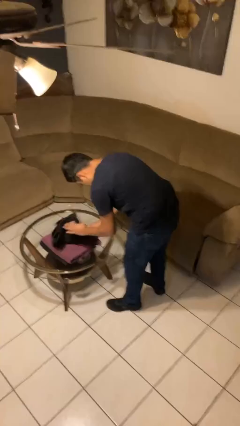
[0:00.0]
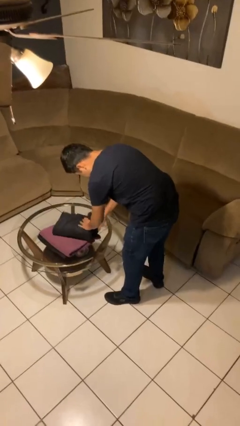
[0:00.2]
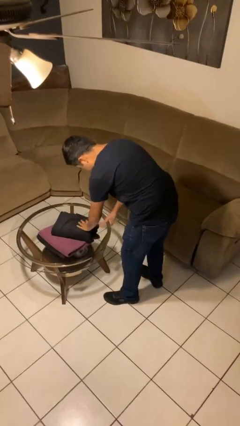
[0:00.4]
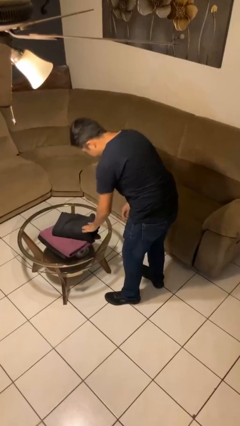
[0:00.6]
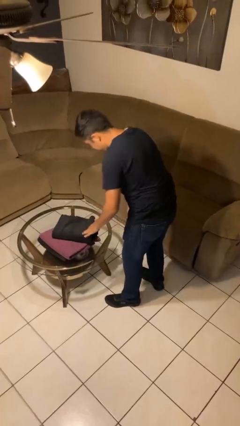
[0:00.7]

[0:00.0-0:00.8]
person folds towel

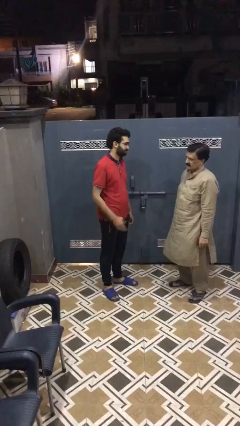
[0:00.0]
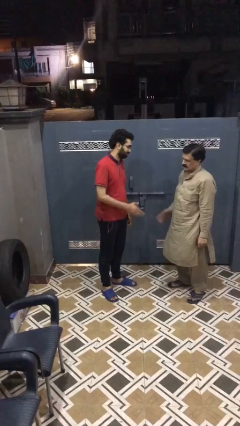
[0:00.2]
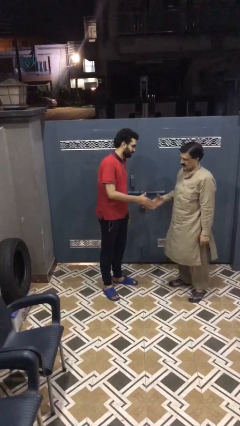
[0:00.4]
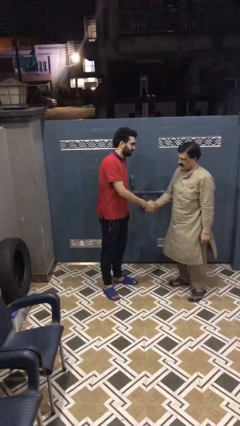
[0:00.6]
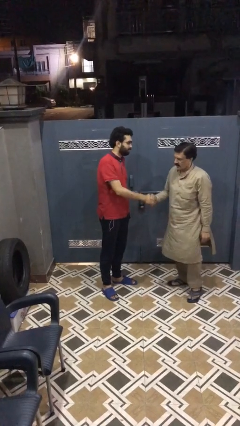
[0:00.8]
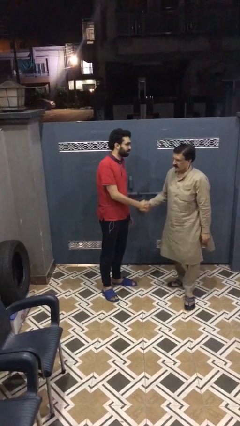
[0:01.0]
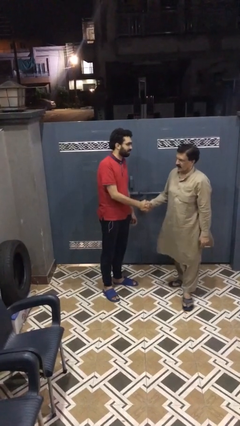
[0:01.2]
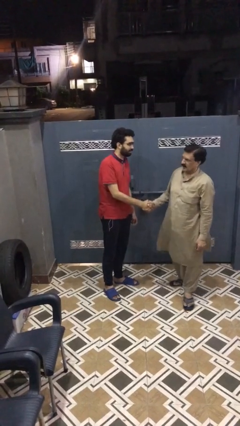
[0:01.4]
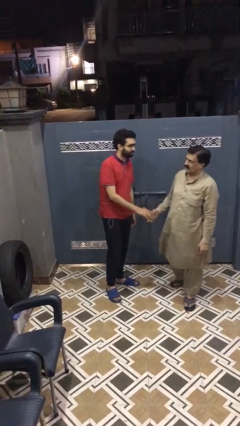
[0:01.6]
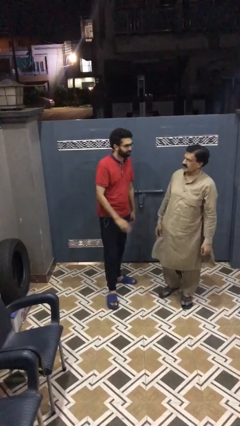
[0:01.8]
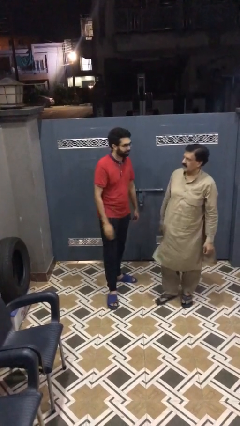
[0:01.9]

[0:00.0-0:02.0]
person shakes hand

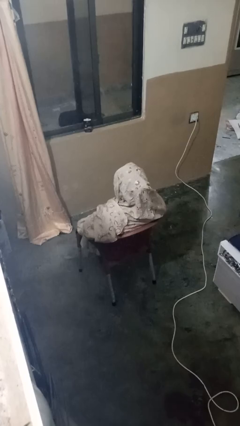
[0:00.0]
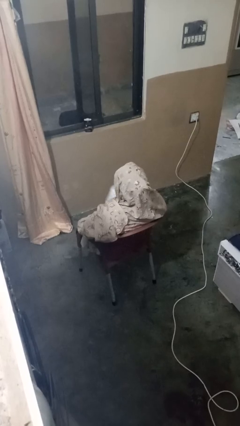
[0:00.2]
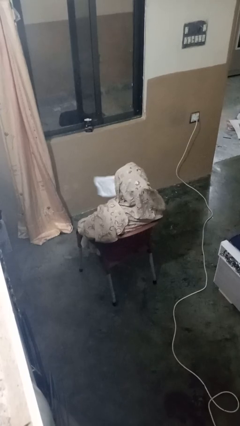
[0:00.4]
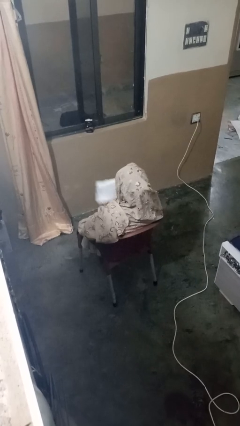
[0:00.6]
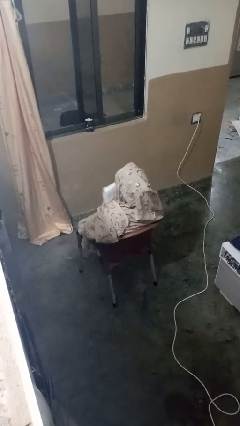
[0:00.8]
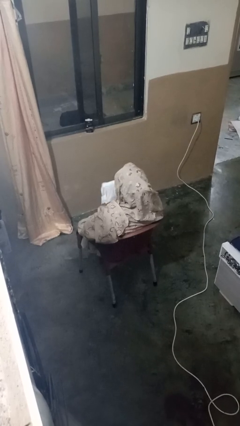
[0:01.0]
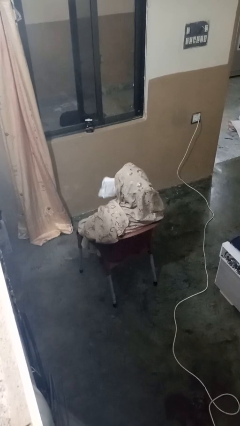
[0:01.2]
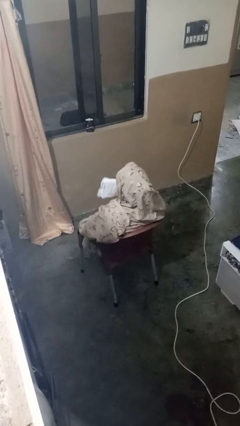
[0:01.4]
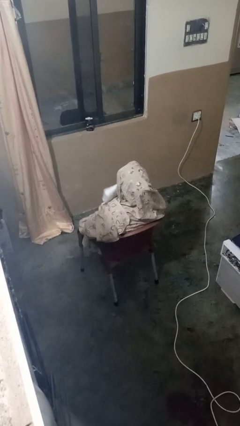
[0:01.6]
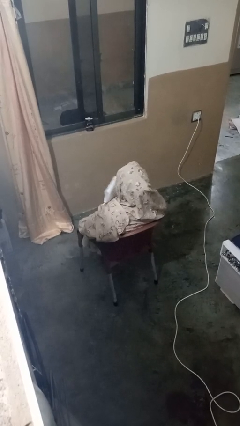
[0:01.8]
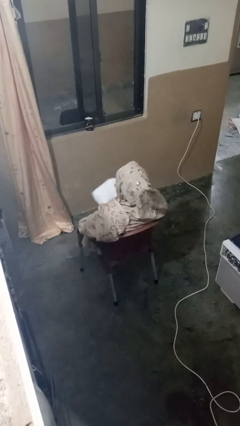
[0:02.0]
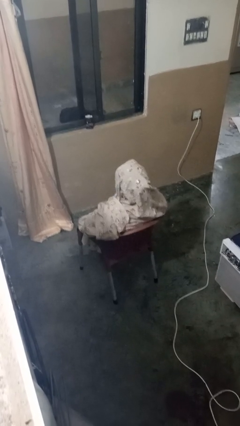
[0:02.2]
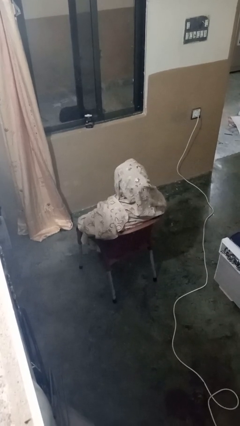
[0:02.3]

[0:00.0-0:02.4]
person wipes mouth with napkin

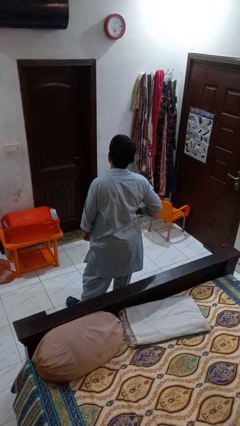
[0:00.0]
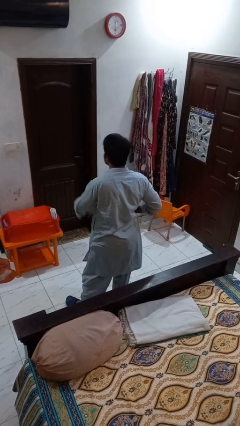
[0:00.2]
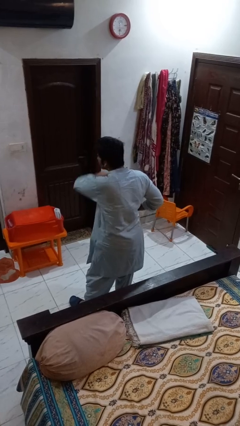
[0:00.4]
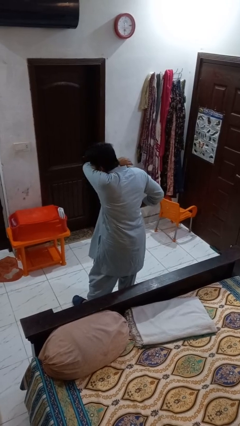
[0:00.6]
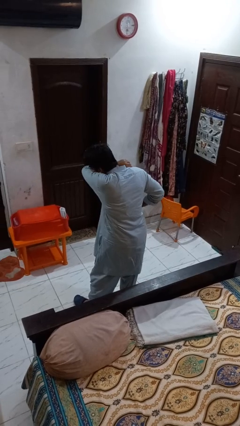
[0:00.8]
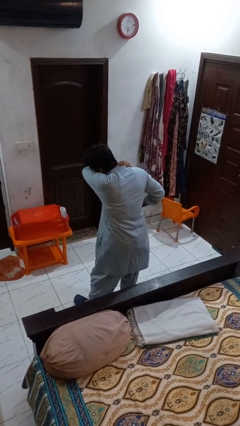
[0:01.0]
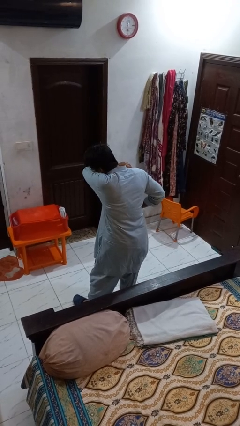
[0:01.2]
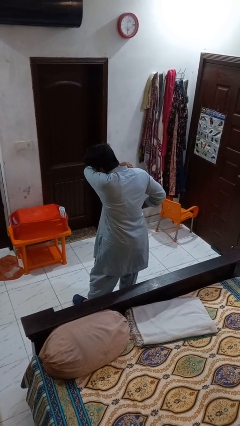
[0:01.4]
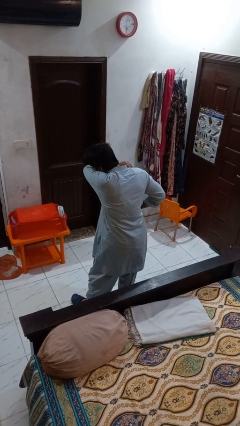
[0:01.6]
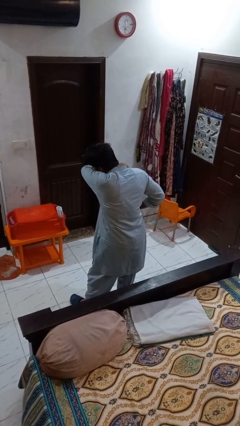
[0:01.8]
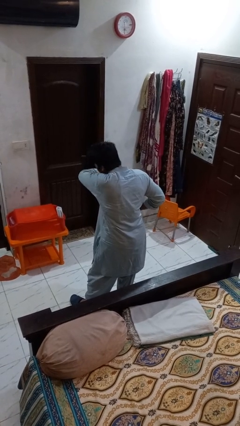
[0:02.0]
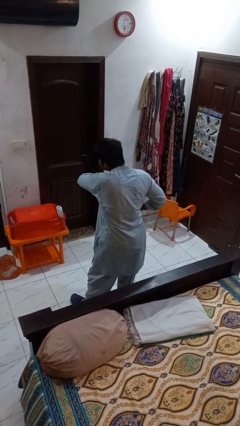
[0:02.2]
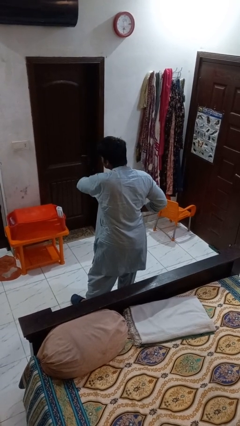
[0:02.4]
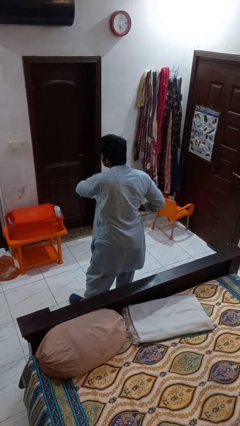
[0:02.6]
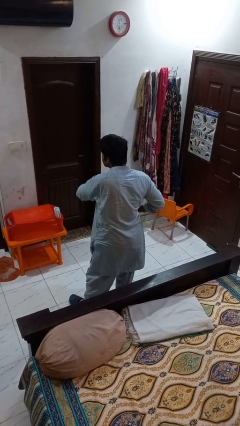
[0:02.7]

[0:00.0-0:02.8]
person sneezes into arm

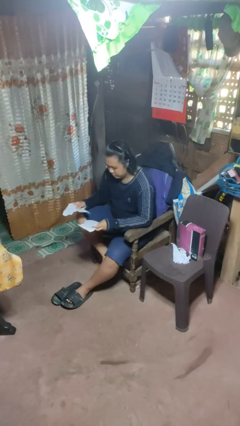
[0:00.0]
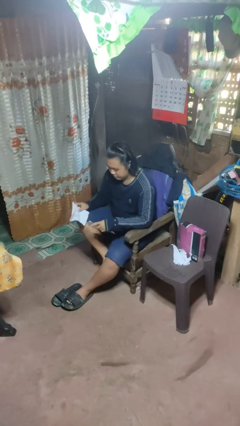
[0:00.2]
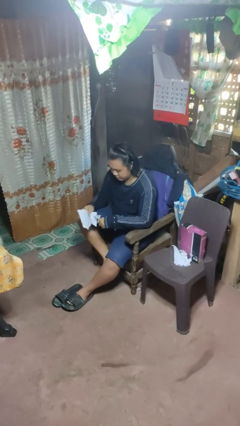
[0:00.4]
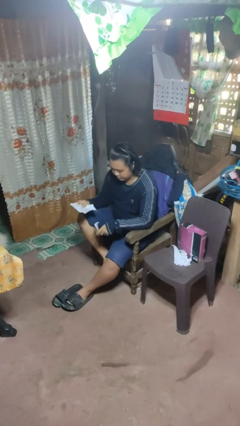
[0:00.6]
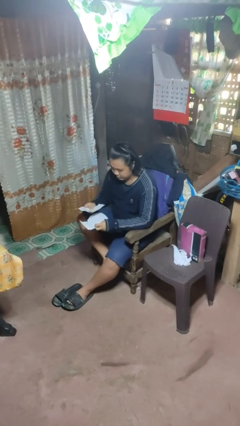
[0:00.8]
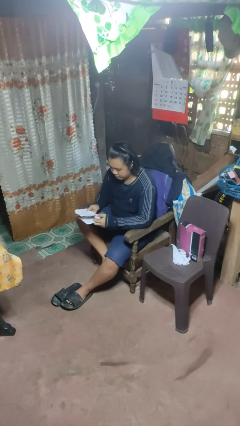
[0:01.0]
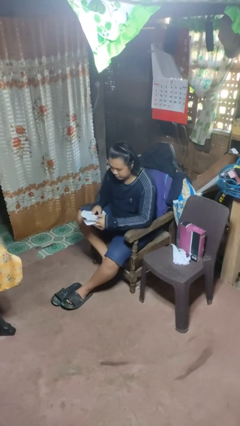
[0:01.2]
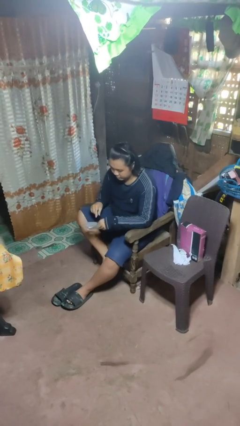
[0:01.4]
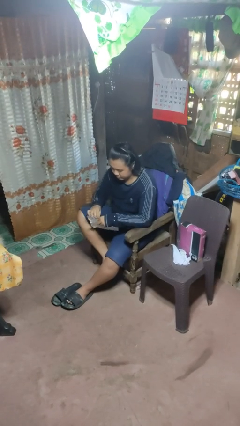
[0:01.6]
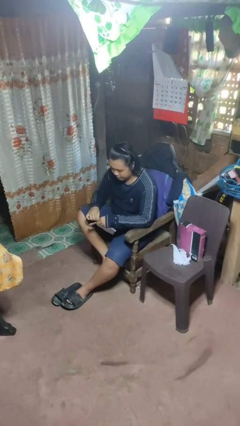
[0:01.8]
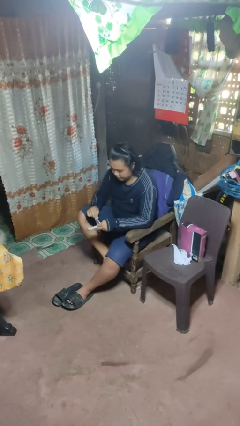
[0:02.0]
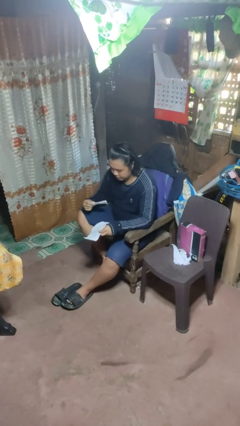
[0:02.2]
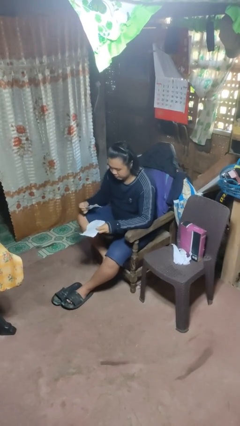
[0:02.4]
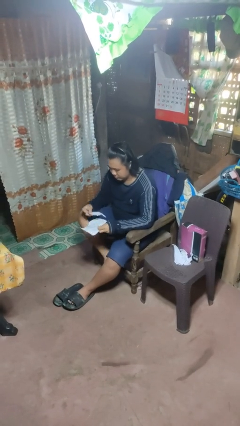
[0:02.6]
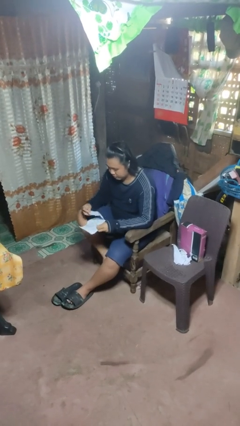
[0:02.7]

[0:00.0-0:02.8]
person tears paper

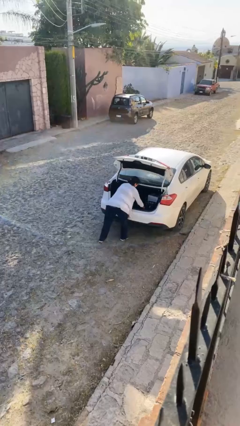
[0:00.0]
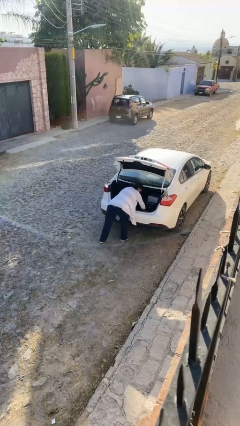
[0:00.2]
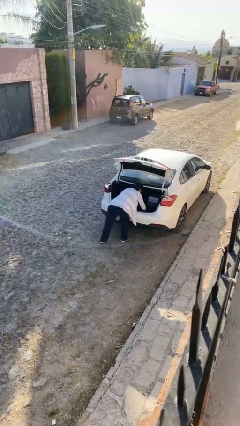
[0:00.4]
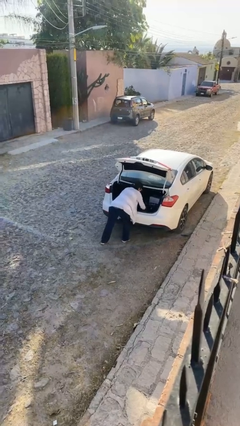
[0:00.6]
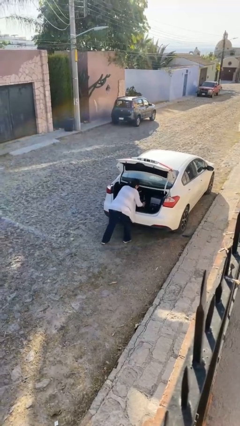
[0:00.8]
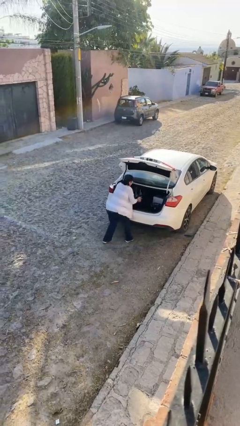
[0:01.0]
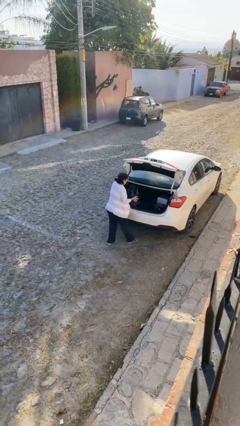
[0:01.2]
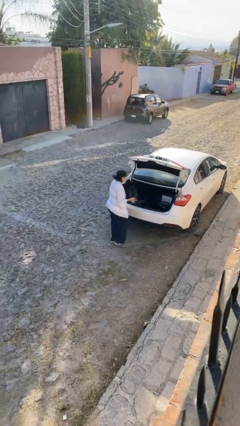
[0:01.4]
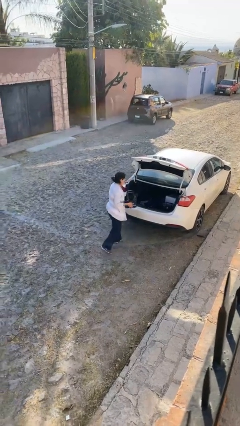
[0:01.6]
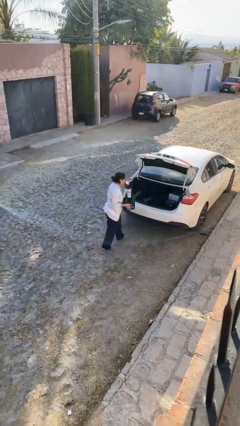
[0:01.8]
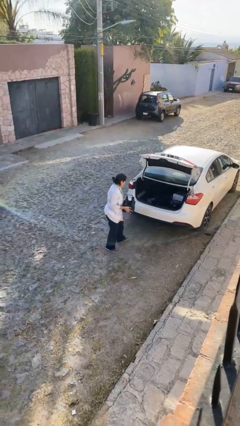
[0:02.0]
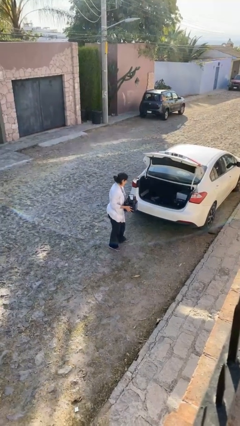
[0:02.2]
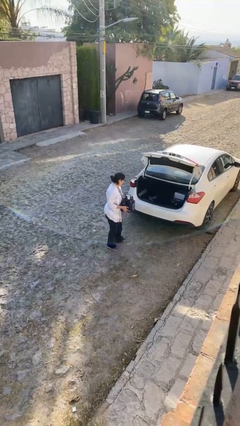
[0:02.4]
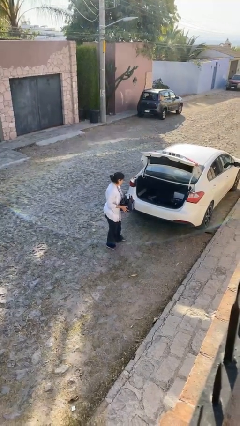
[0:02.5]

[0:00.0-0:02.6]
person unloads car

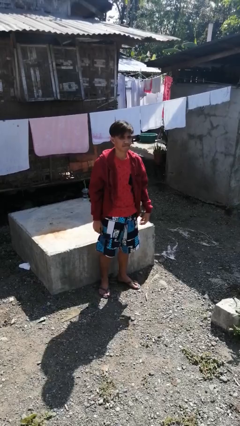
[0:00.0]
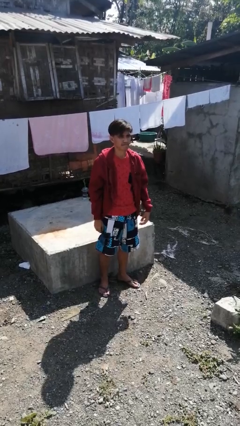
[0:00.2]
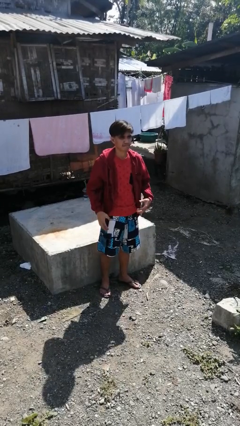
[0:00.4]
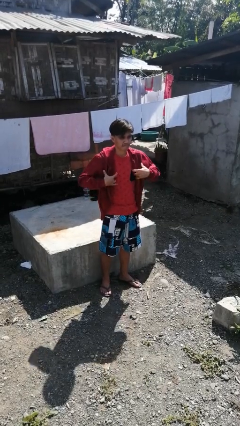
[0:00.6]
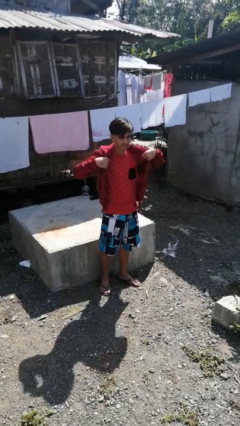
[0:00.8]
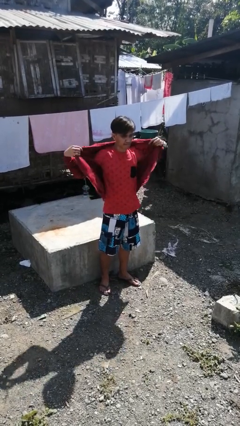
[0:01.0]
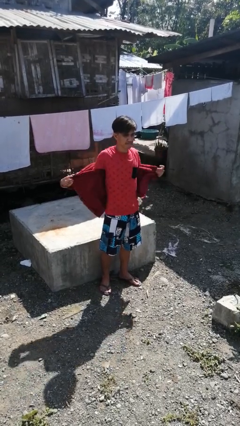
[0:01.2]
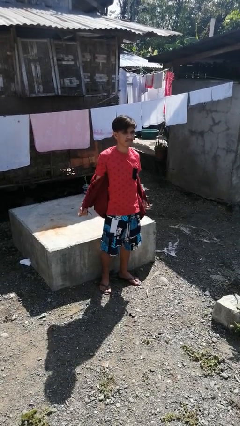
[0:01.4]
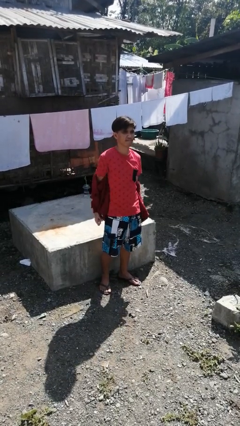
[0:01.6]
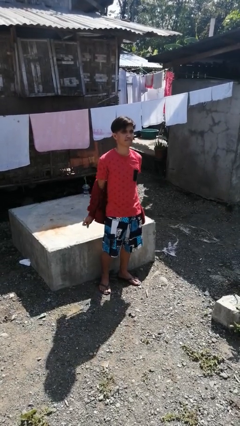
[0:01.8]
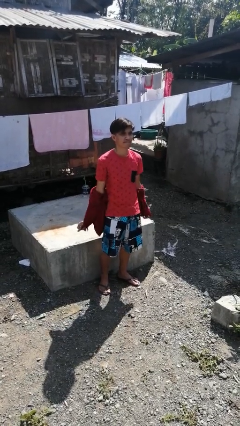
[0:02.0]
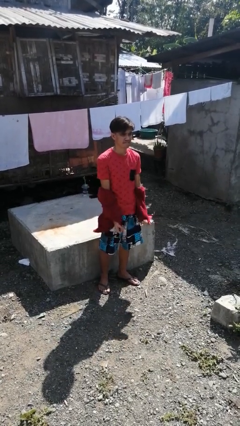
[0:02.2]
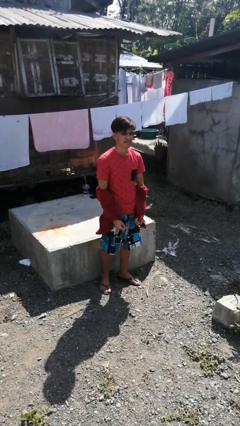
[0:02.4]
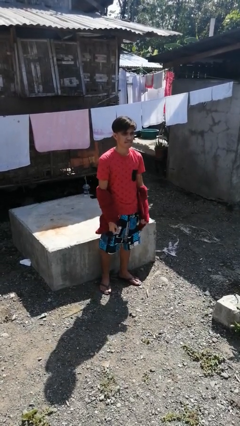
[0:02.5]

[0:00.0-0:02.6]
person takes off jacket

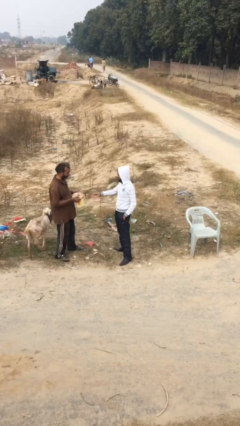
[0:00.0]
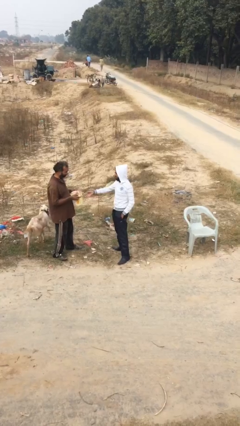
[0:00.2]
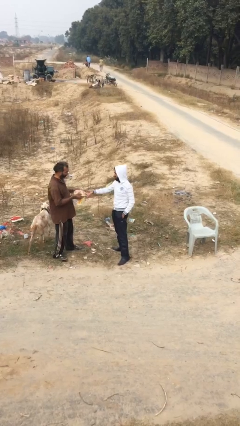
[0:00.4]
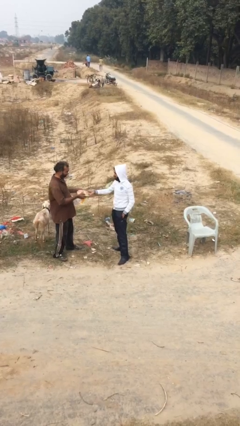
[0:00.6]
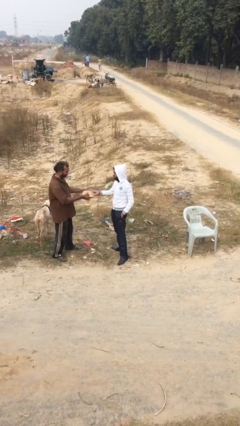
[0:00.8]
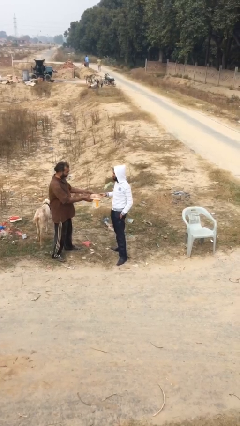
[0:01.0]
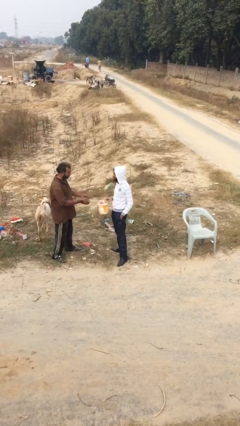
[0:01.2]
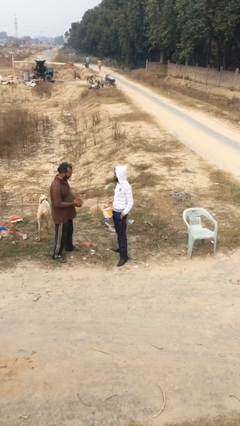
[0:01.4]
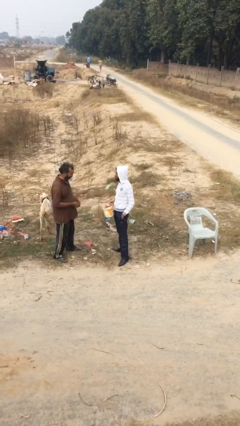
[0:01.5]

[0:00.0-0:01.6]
person transfers object to person
